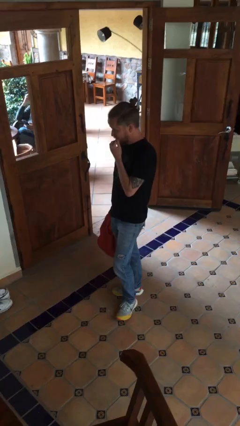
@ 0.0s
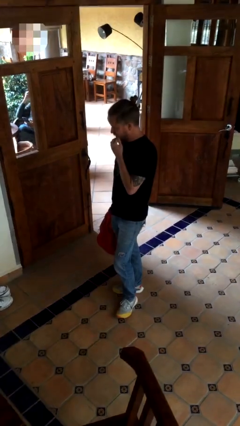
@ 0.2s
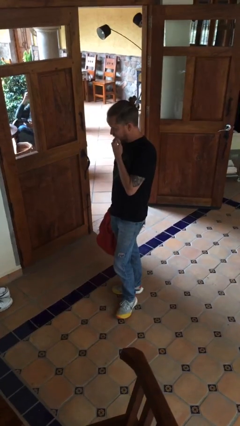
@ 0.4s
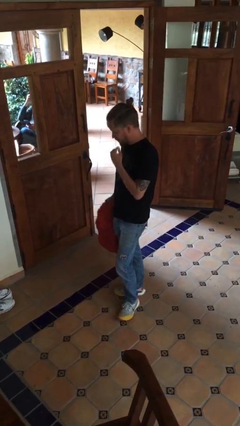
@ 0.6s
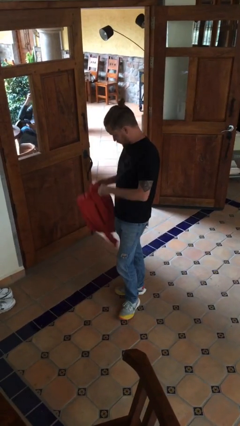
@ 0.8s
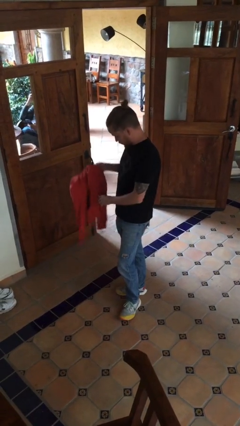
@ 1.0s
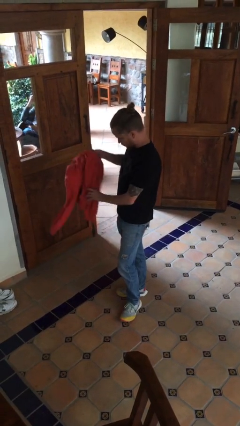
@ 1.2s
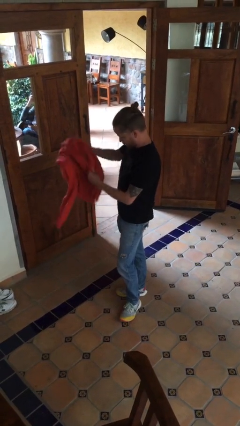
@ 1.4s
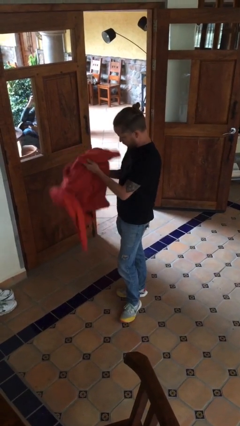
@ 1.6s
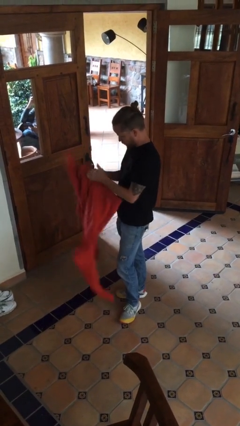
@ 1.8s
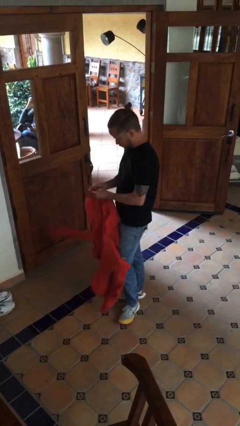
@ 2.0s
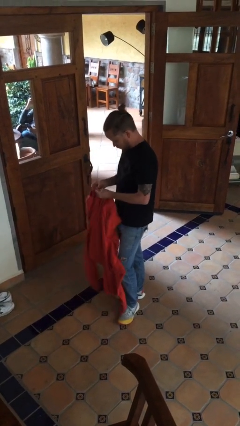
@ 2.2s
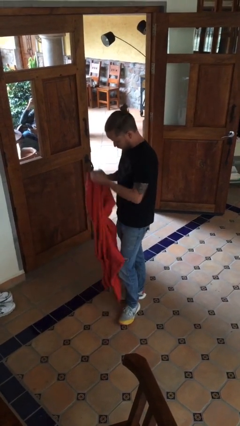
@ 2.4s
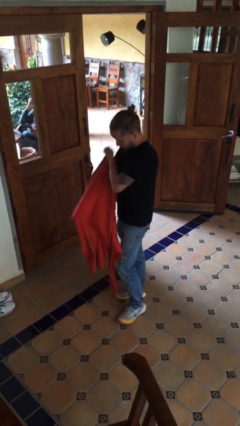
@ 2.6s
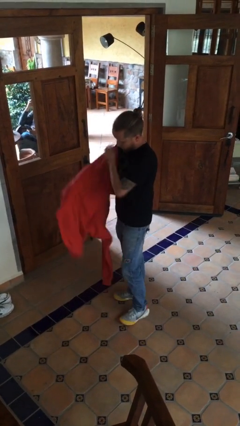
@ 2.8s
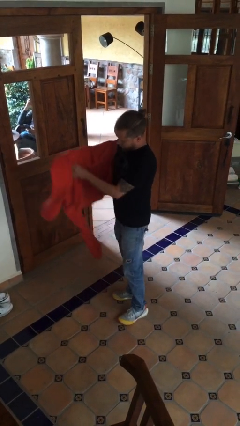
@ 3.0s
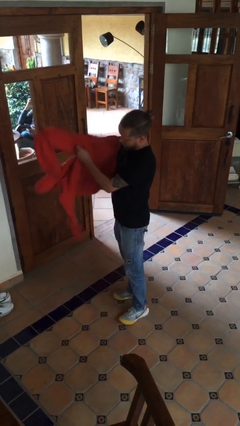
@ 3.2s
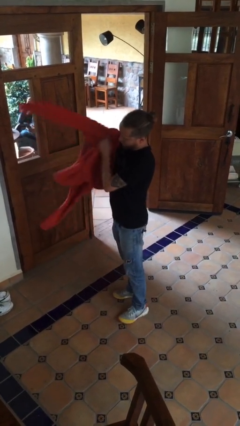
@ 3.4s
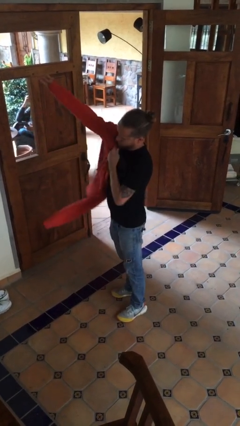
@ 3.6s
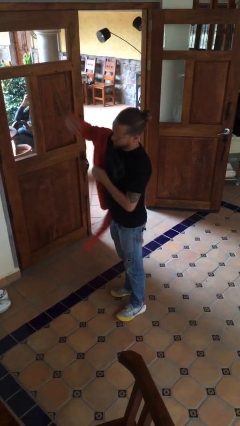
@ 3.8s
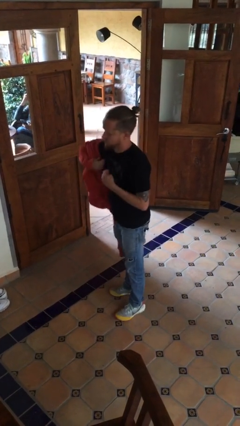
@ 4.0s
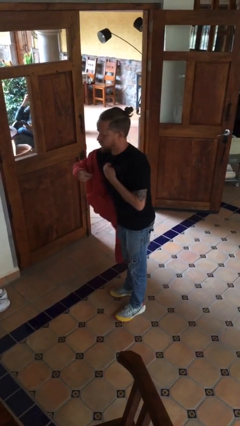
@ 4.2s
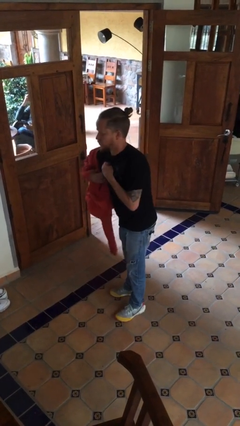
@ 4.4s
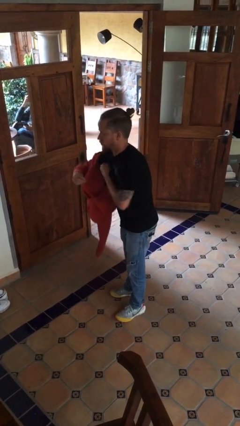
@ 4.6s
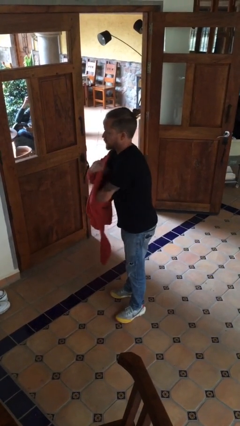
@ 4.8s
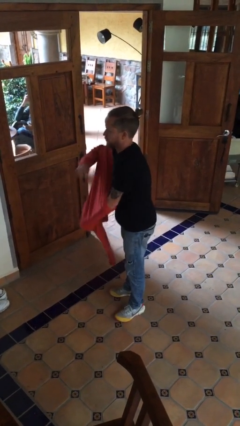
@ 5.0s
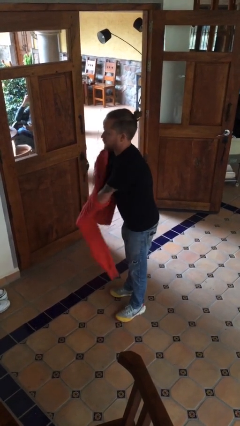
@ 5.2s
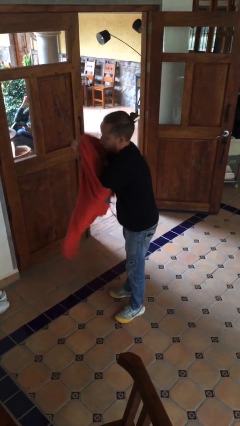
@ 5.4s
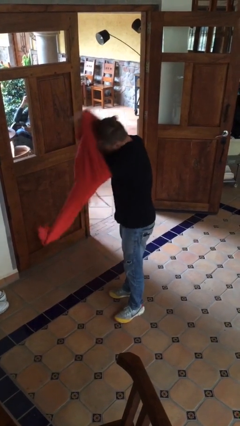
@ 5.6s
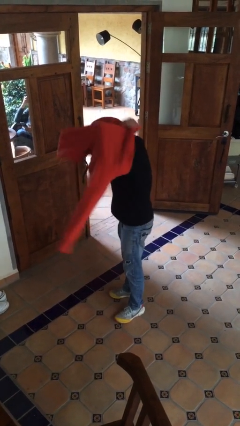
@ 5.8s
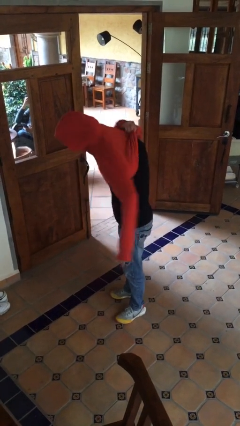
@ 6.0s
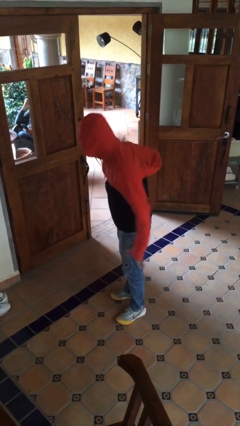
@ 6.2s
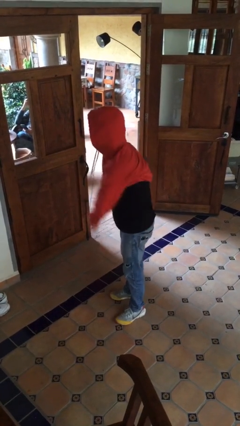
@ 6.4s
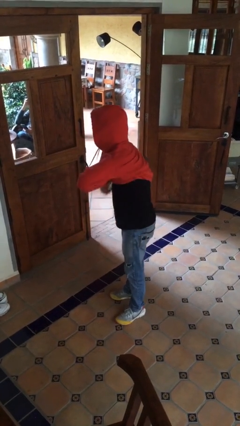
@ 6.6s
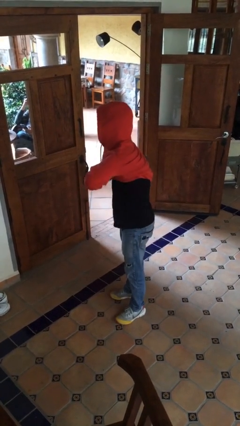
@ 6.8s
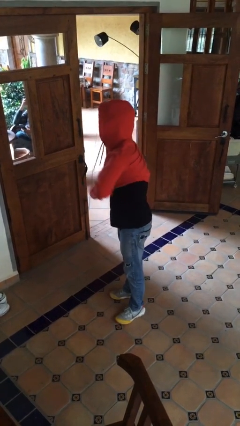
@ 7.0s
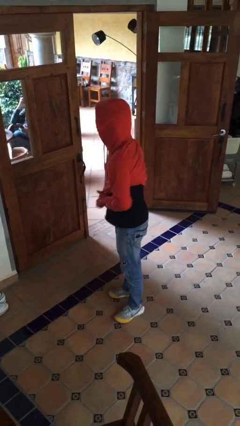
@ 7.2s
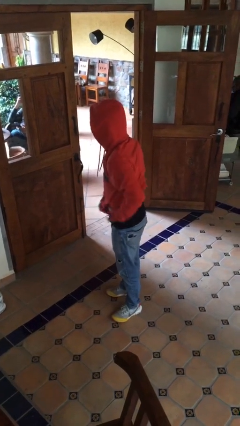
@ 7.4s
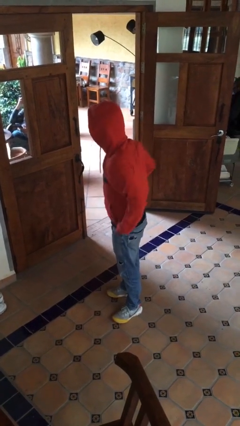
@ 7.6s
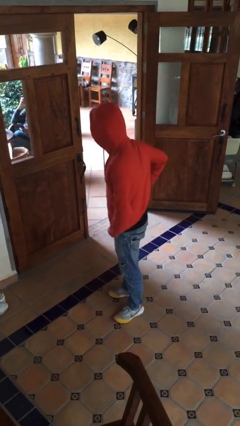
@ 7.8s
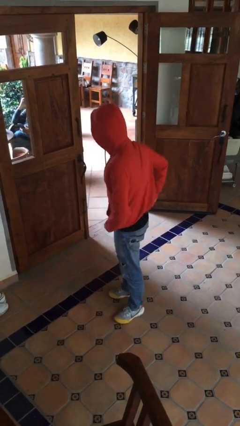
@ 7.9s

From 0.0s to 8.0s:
person puts on hoodie

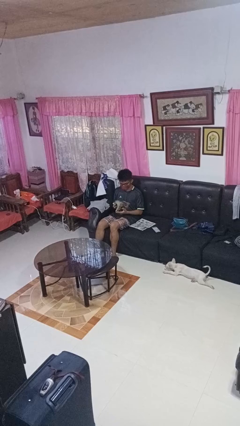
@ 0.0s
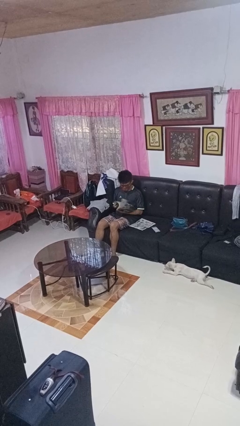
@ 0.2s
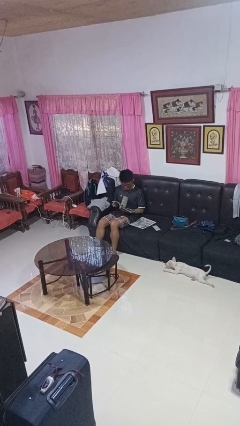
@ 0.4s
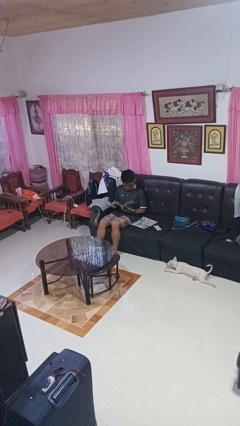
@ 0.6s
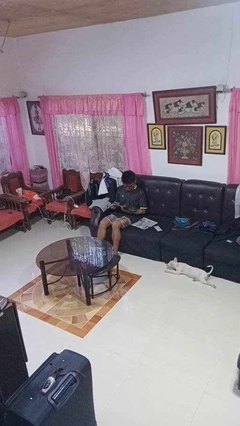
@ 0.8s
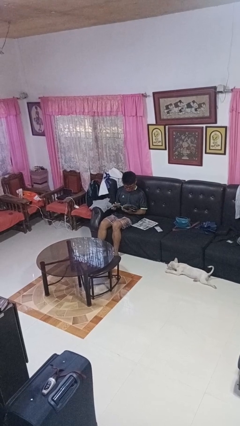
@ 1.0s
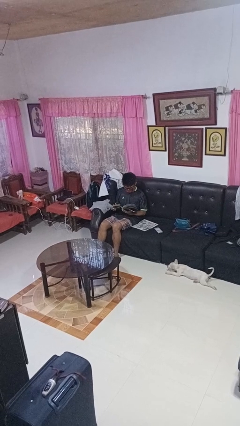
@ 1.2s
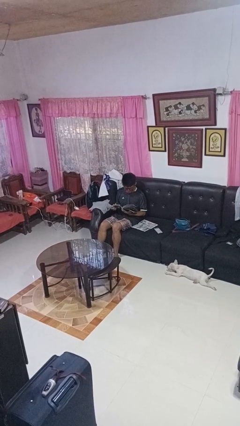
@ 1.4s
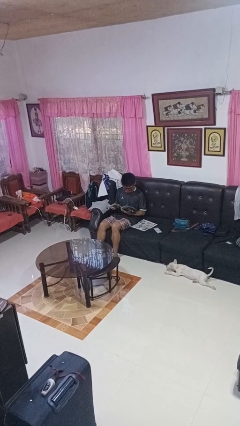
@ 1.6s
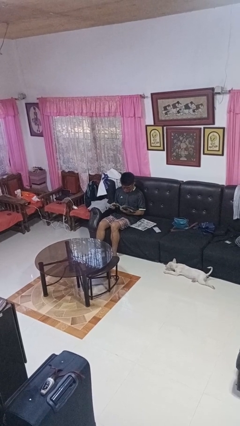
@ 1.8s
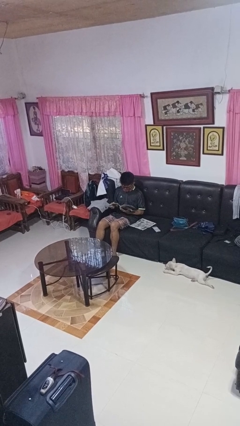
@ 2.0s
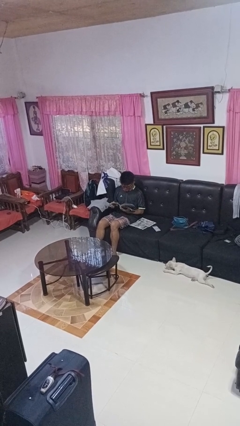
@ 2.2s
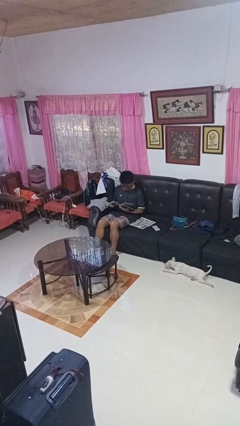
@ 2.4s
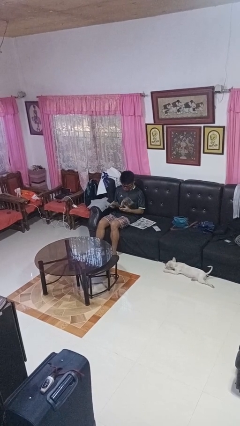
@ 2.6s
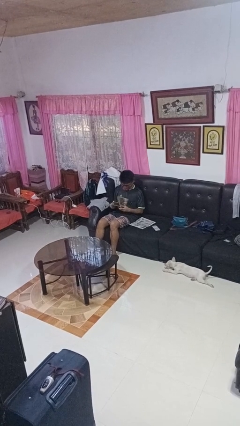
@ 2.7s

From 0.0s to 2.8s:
person reads magazine

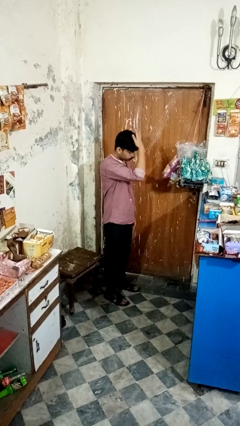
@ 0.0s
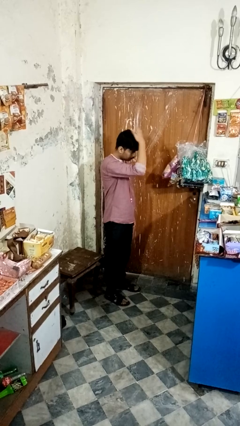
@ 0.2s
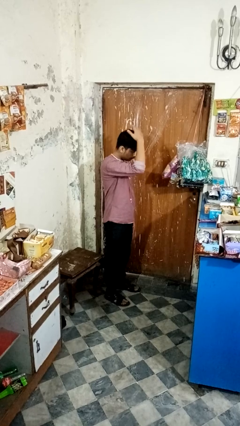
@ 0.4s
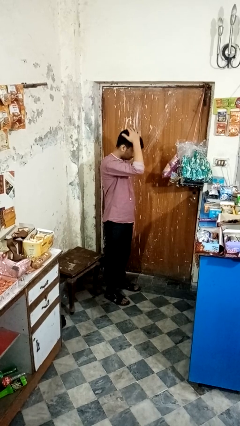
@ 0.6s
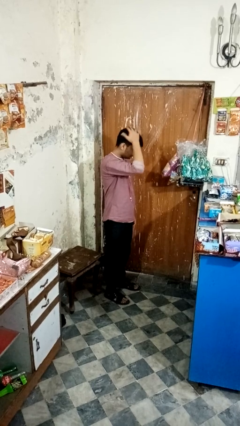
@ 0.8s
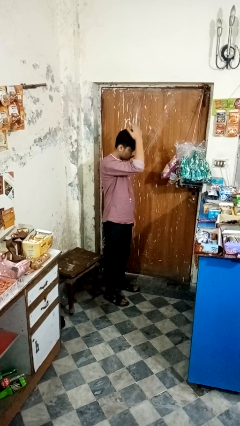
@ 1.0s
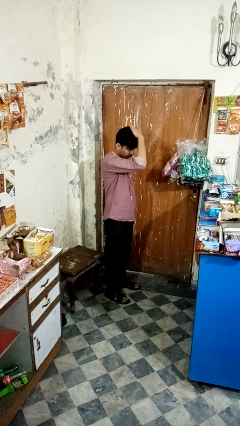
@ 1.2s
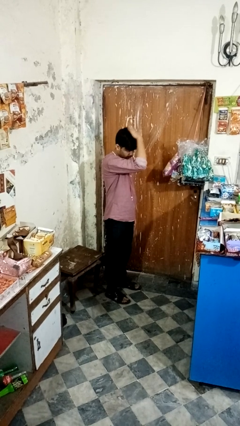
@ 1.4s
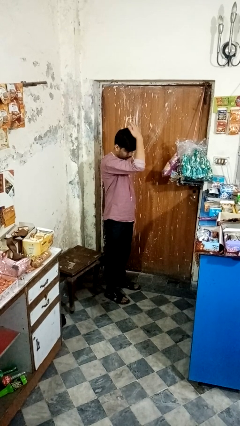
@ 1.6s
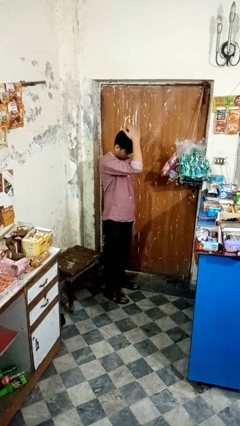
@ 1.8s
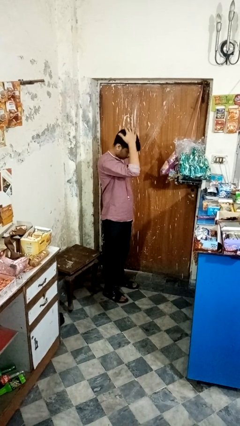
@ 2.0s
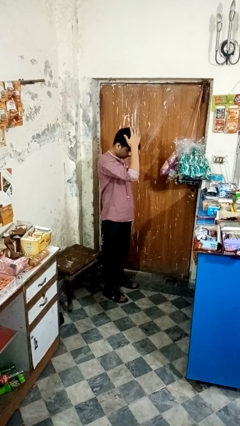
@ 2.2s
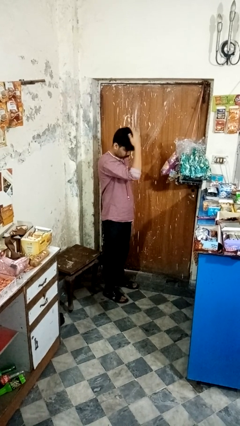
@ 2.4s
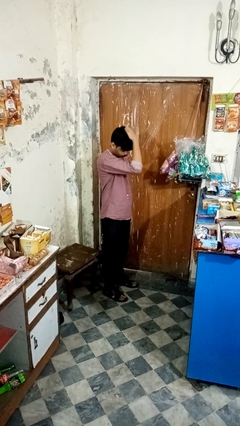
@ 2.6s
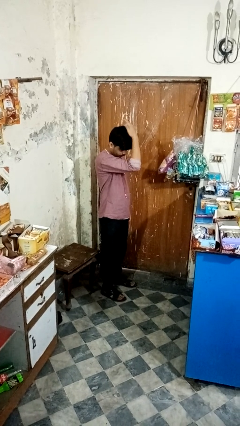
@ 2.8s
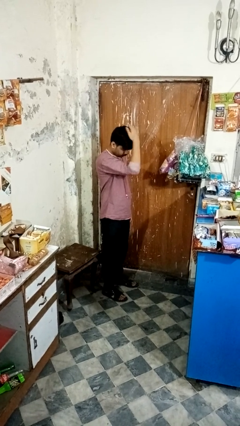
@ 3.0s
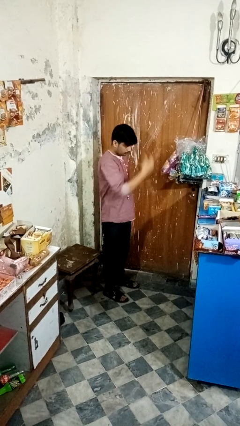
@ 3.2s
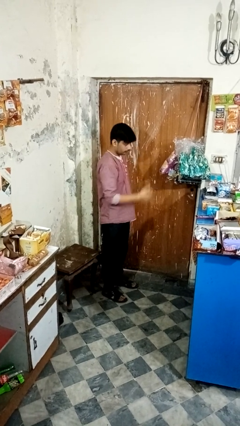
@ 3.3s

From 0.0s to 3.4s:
person pats head

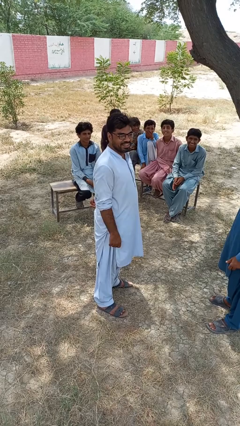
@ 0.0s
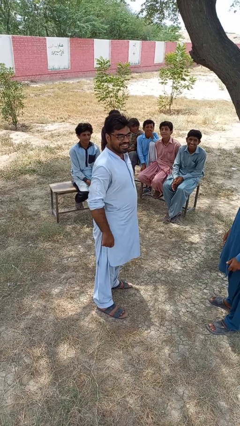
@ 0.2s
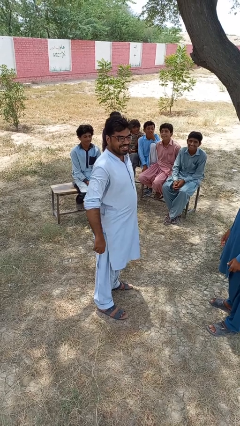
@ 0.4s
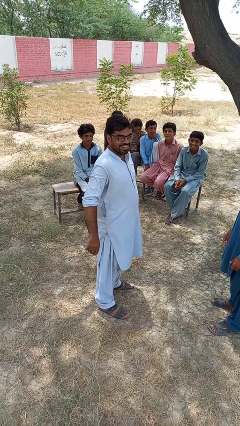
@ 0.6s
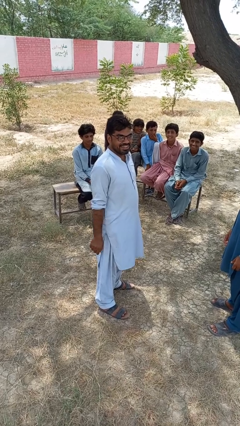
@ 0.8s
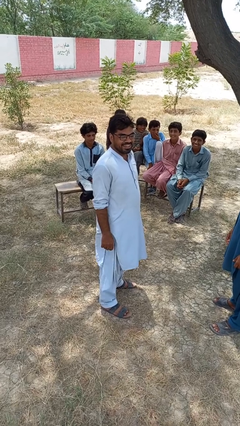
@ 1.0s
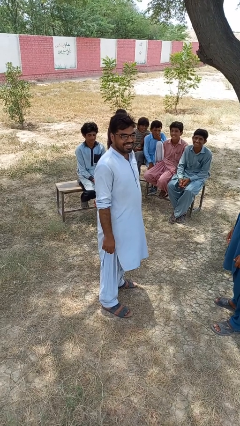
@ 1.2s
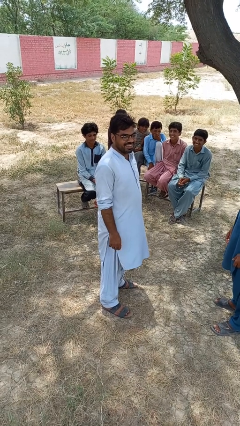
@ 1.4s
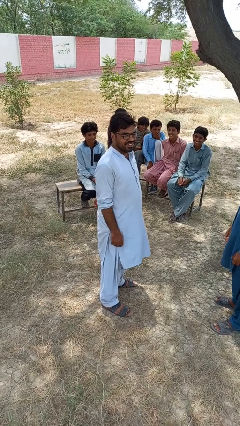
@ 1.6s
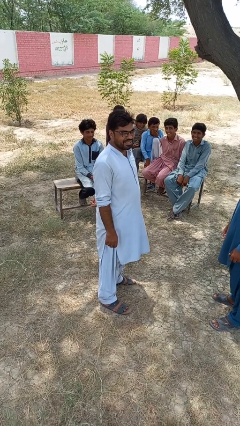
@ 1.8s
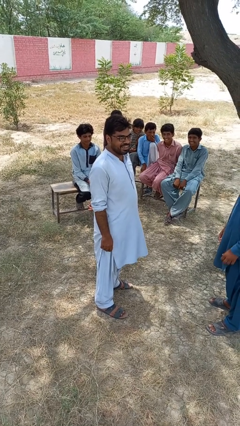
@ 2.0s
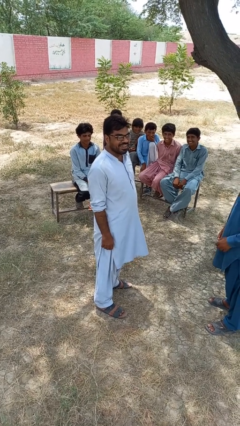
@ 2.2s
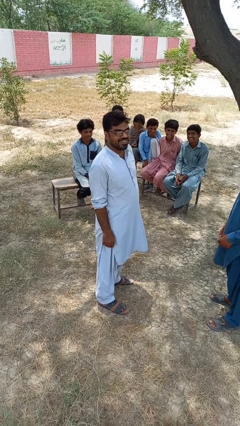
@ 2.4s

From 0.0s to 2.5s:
person laughs with person

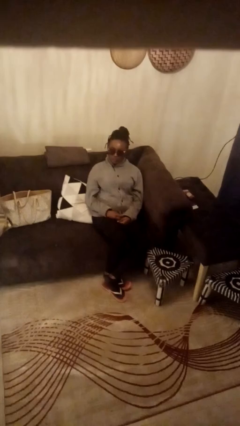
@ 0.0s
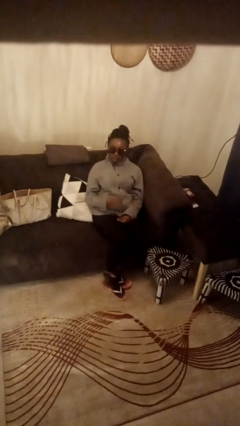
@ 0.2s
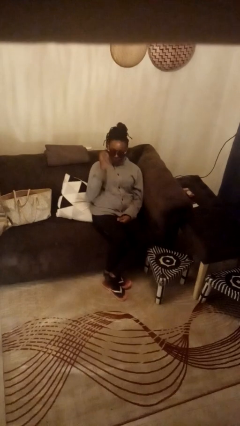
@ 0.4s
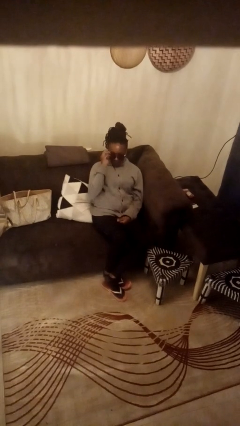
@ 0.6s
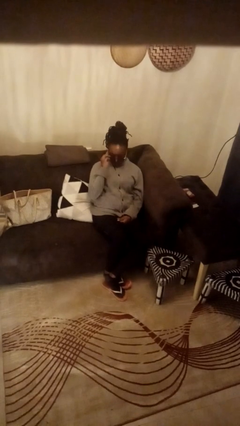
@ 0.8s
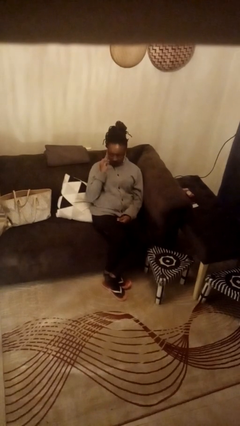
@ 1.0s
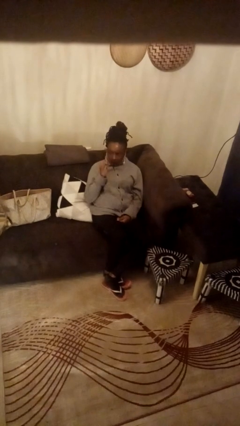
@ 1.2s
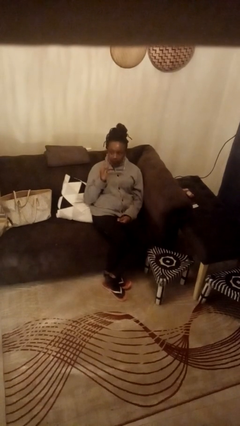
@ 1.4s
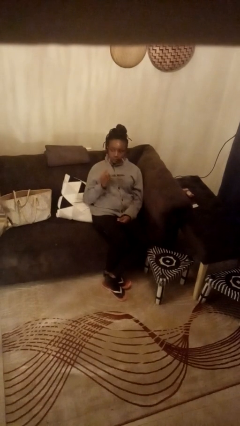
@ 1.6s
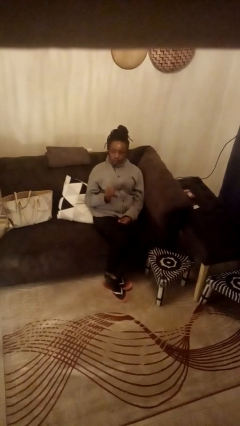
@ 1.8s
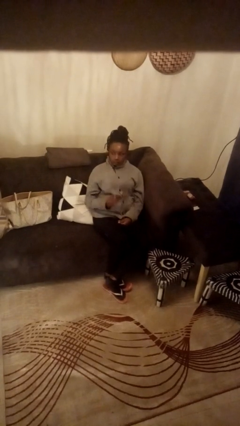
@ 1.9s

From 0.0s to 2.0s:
person takes off sunglasses
